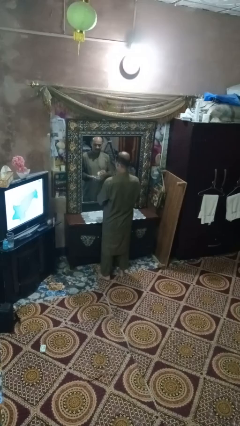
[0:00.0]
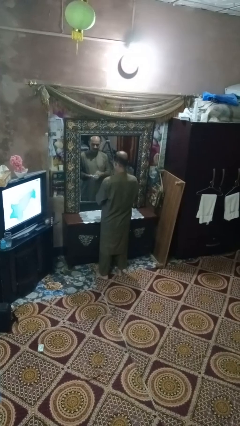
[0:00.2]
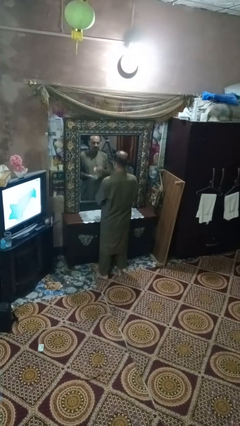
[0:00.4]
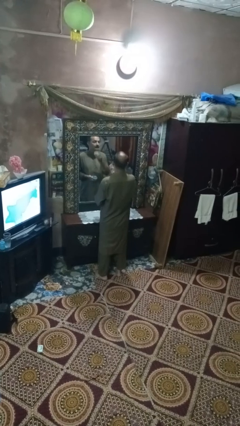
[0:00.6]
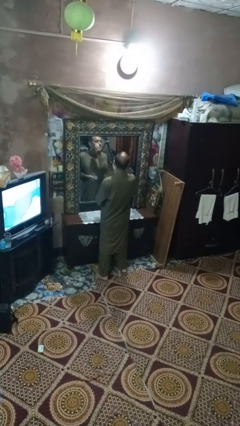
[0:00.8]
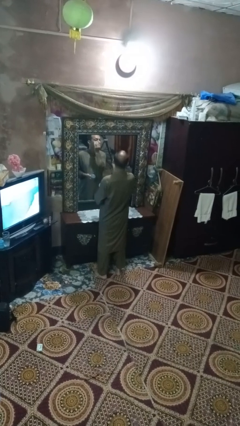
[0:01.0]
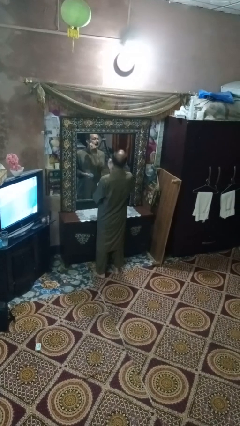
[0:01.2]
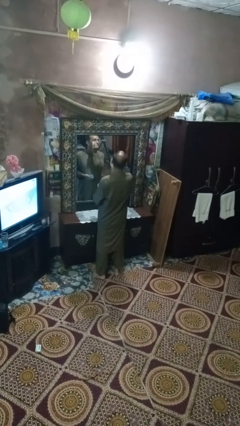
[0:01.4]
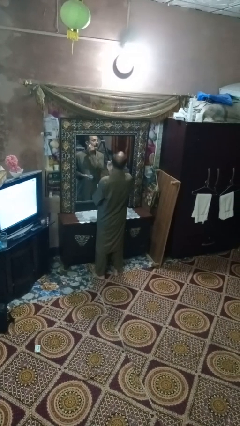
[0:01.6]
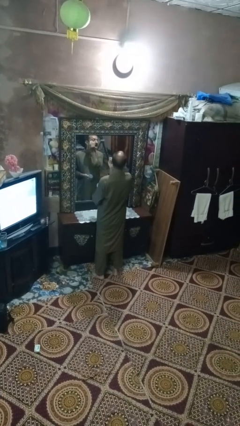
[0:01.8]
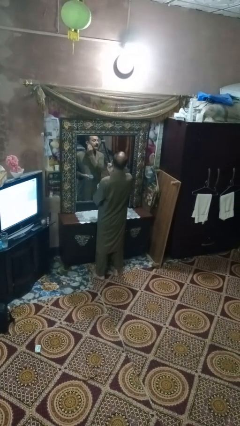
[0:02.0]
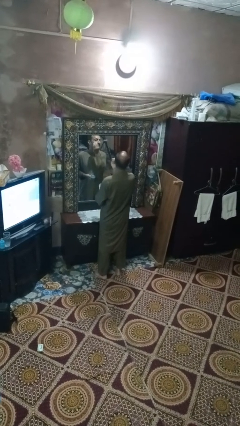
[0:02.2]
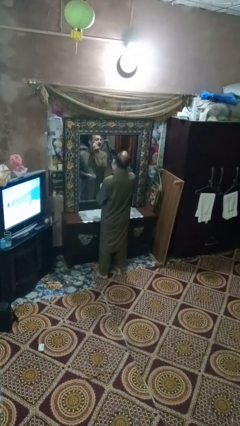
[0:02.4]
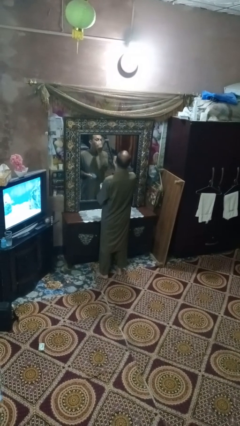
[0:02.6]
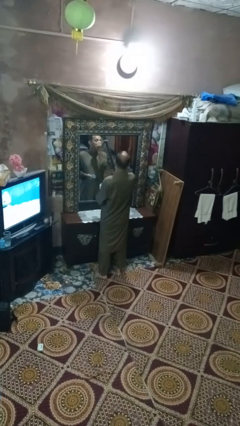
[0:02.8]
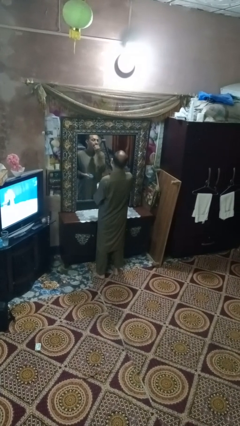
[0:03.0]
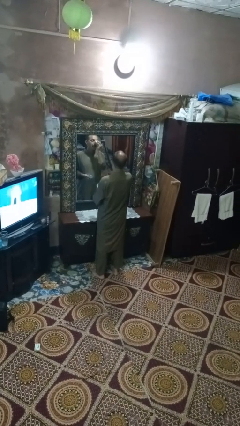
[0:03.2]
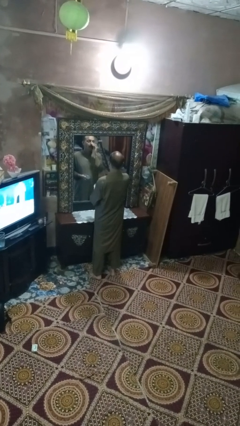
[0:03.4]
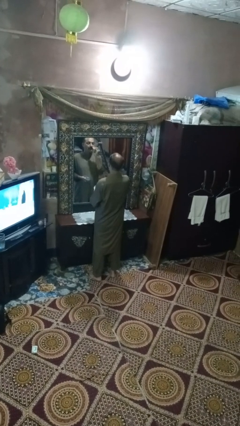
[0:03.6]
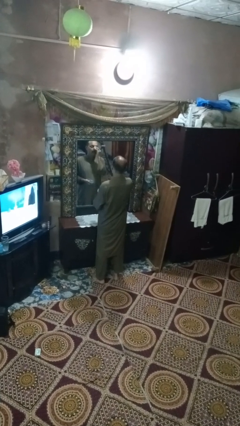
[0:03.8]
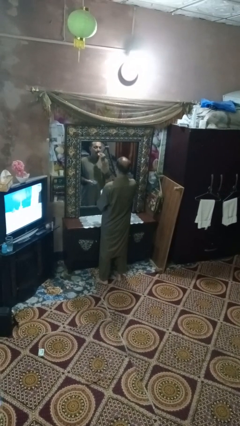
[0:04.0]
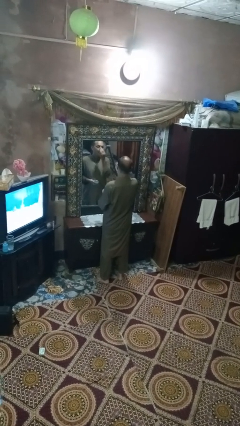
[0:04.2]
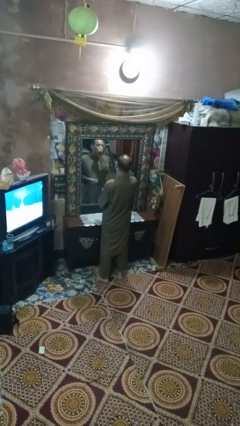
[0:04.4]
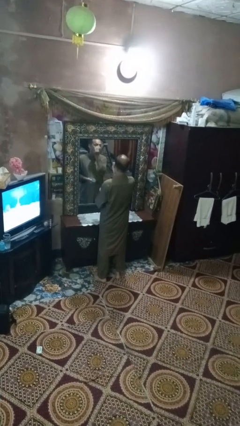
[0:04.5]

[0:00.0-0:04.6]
person applies foundation makeup

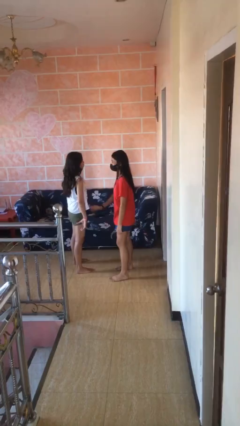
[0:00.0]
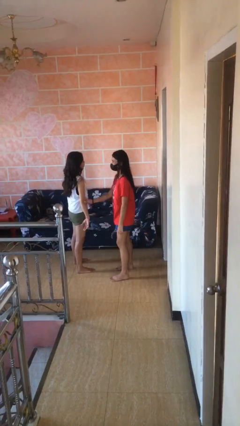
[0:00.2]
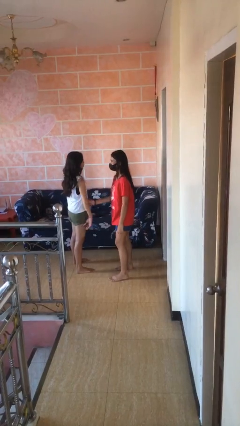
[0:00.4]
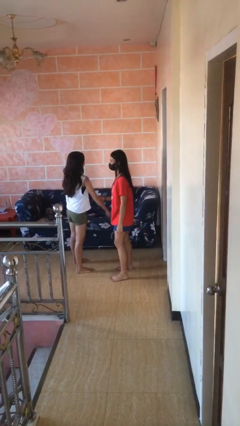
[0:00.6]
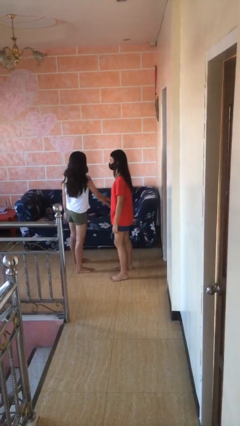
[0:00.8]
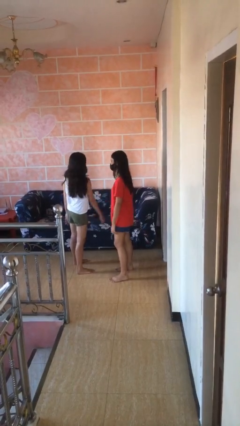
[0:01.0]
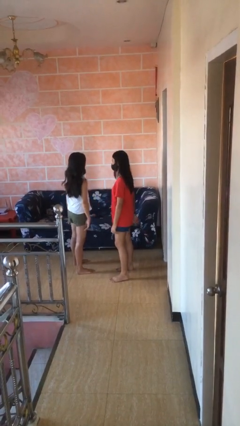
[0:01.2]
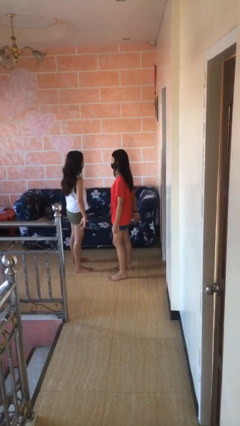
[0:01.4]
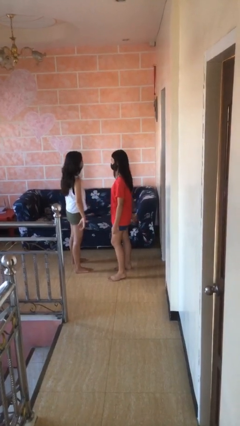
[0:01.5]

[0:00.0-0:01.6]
person grabs person by forearm

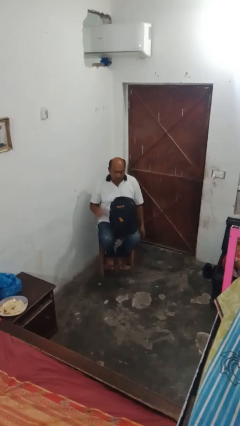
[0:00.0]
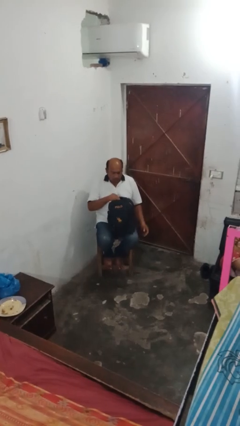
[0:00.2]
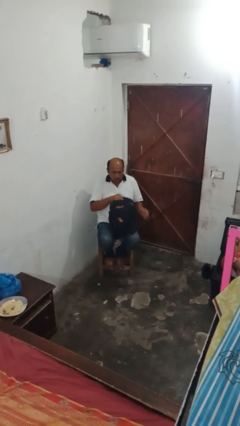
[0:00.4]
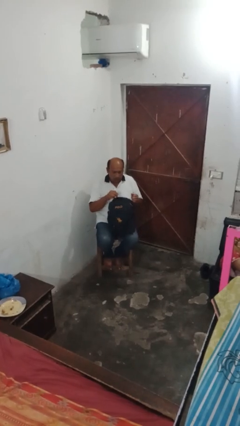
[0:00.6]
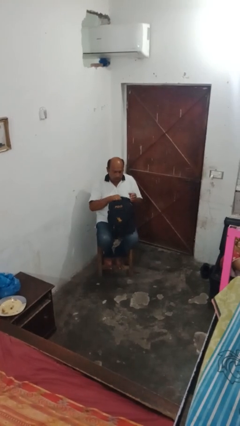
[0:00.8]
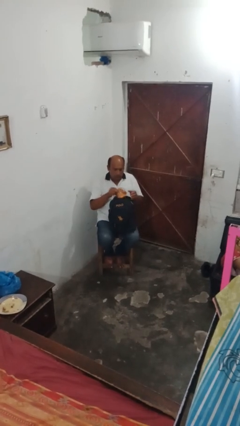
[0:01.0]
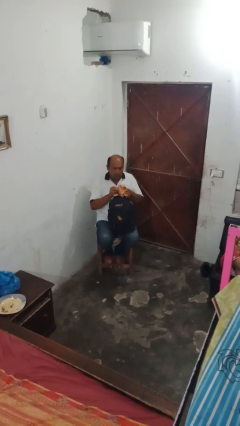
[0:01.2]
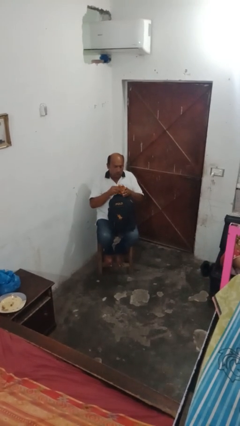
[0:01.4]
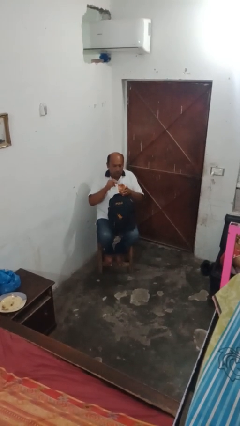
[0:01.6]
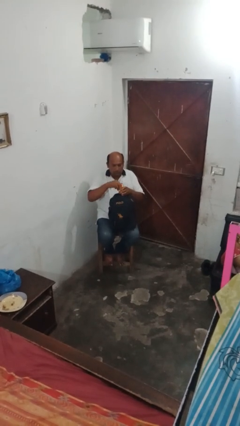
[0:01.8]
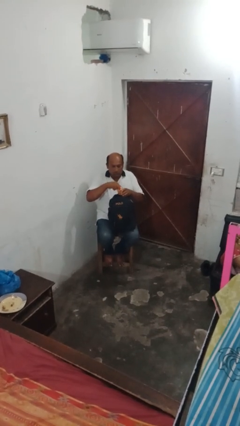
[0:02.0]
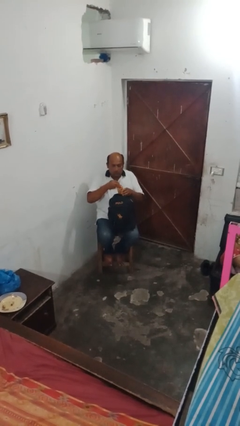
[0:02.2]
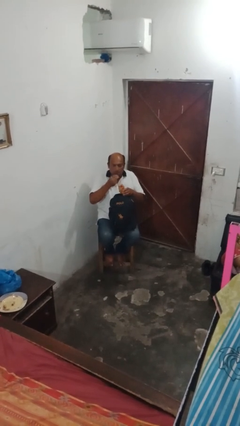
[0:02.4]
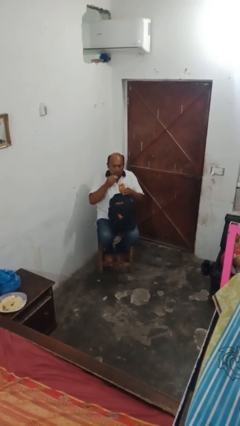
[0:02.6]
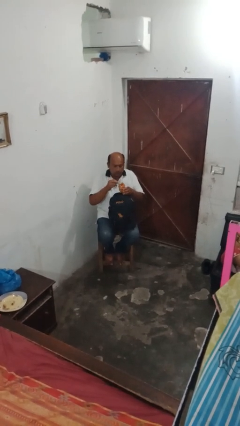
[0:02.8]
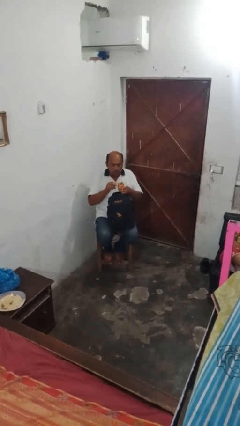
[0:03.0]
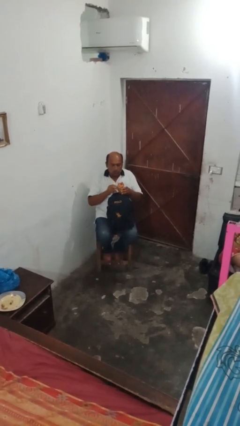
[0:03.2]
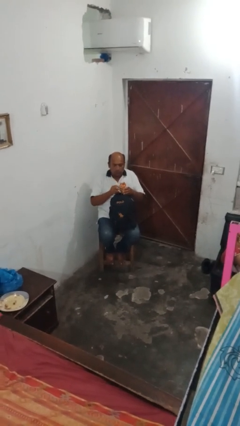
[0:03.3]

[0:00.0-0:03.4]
person eats snack from bag

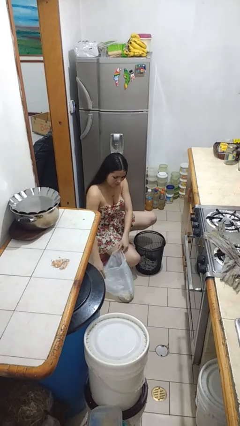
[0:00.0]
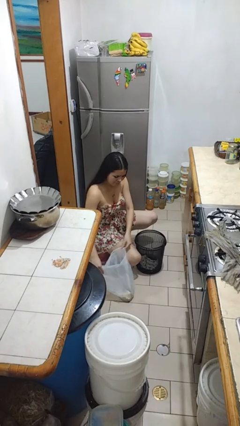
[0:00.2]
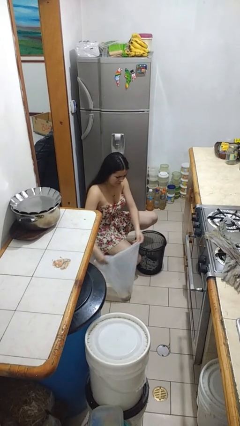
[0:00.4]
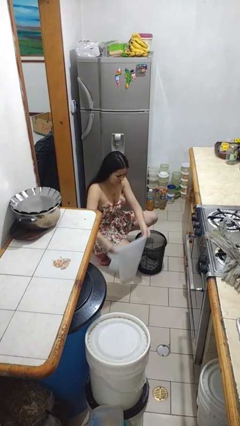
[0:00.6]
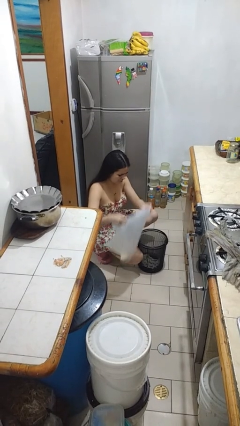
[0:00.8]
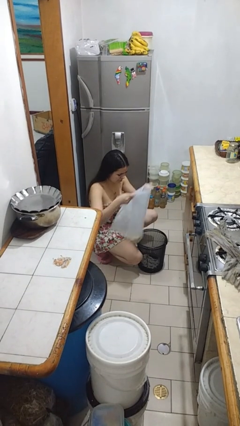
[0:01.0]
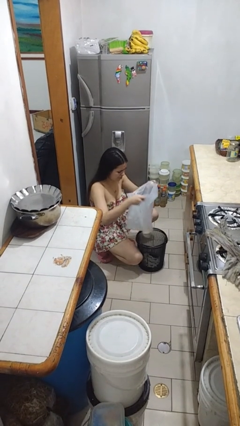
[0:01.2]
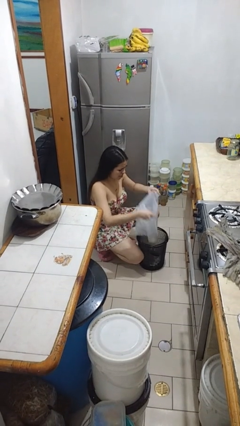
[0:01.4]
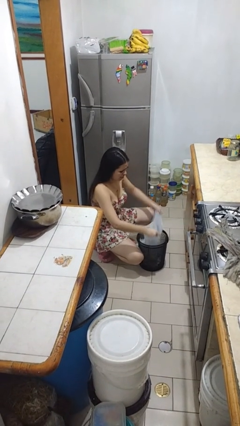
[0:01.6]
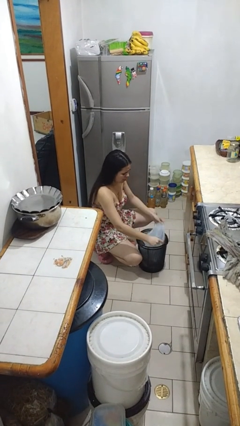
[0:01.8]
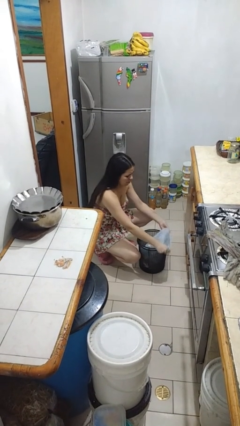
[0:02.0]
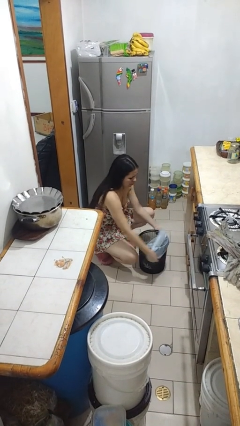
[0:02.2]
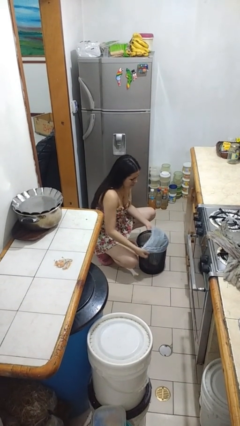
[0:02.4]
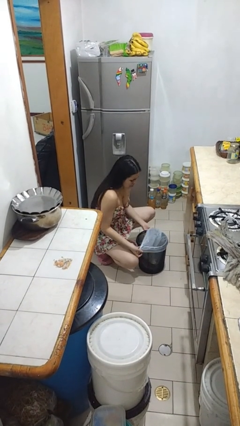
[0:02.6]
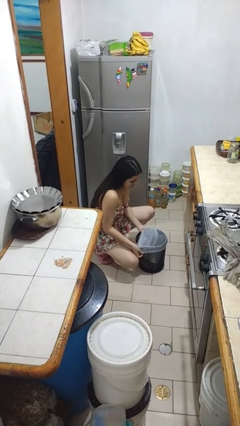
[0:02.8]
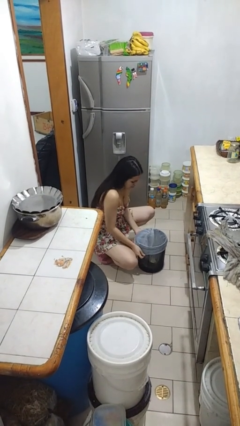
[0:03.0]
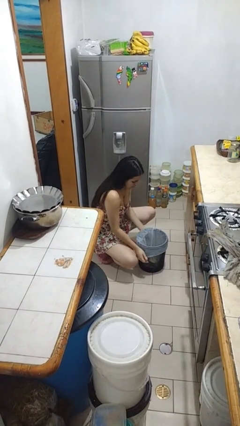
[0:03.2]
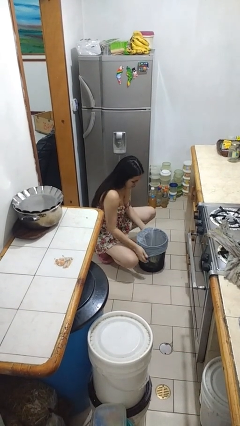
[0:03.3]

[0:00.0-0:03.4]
person inserts trashbag into trashcan

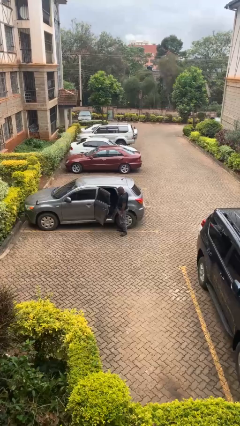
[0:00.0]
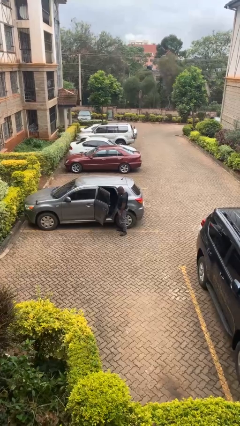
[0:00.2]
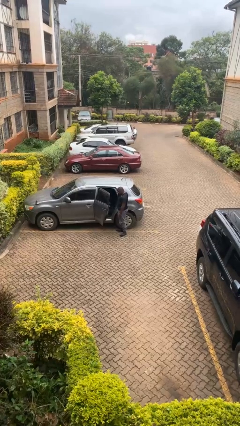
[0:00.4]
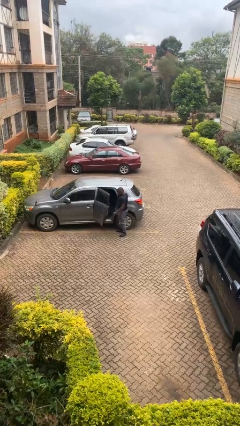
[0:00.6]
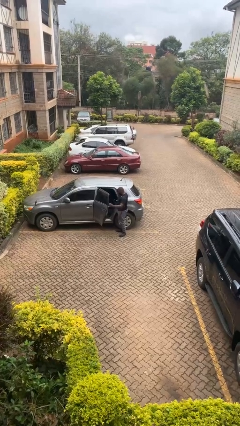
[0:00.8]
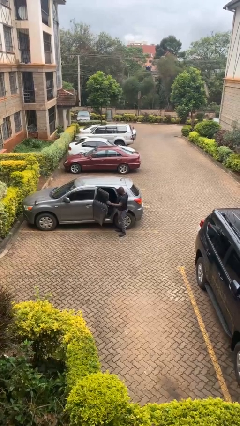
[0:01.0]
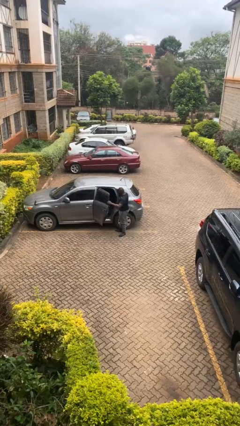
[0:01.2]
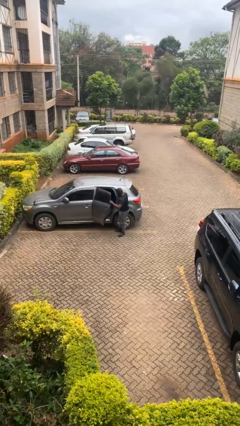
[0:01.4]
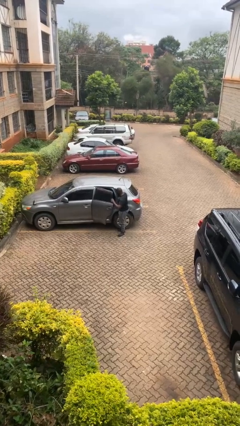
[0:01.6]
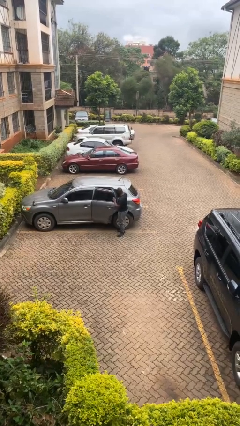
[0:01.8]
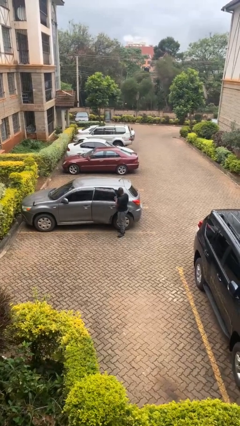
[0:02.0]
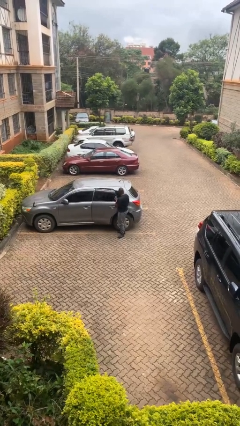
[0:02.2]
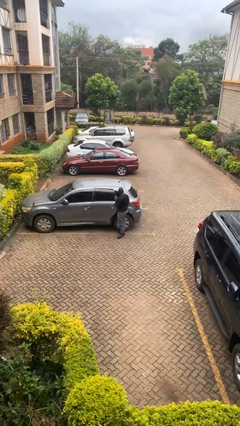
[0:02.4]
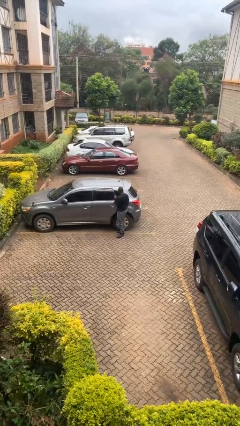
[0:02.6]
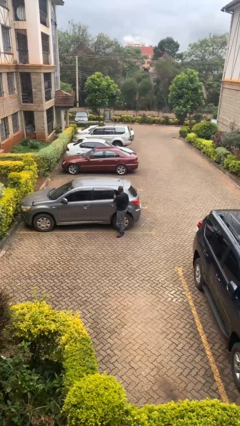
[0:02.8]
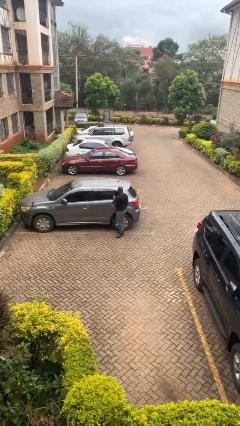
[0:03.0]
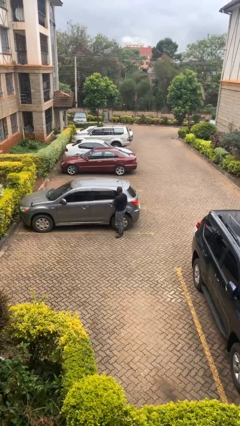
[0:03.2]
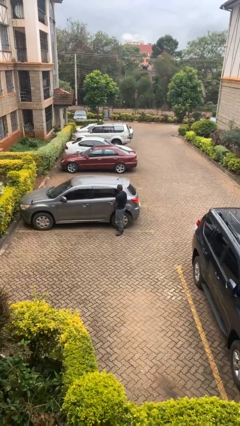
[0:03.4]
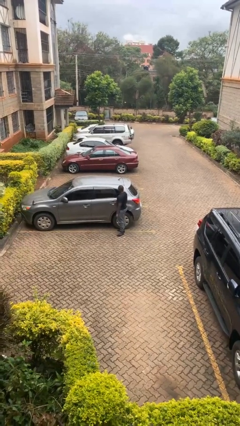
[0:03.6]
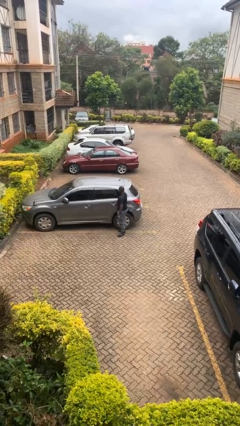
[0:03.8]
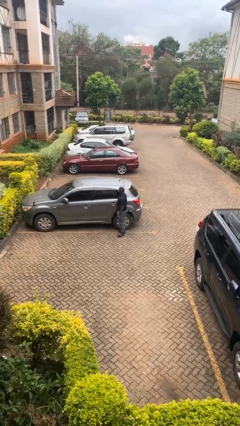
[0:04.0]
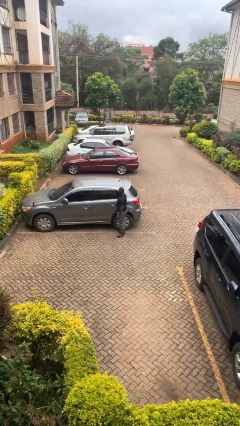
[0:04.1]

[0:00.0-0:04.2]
person closes car door

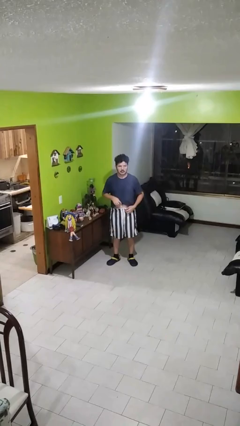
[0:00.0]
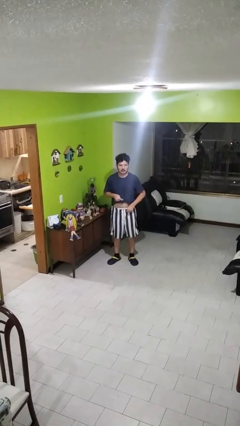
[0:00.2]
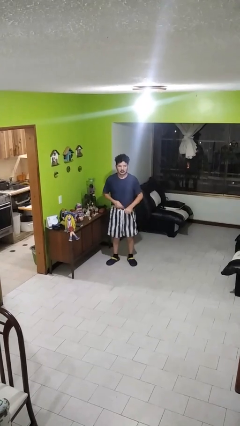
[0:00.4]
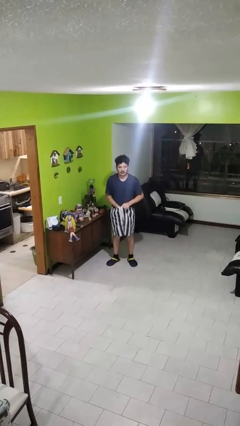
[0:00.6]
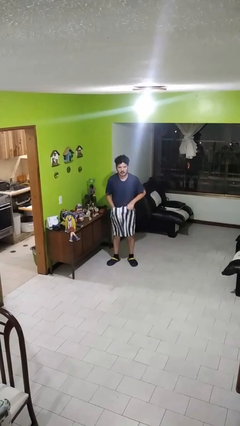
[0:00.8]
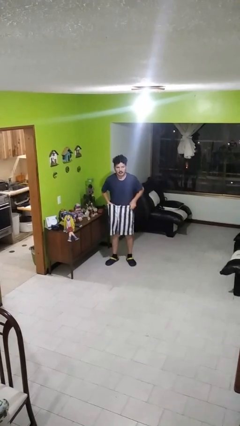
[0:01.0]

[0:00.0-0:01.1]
person tucks in shirt
